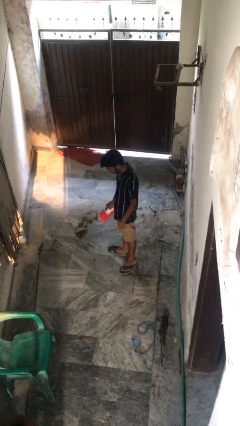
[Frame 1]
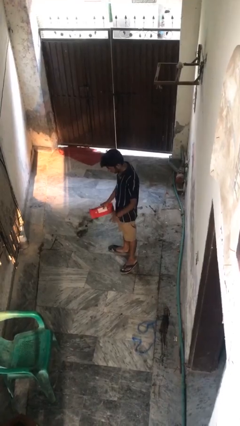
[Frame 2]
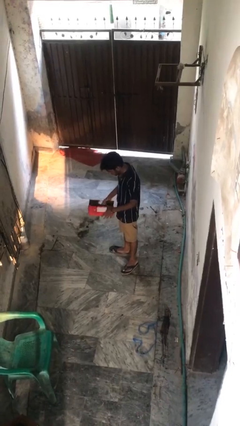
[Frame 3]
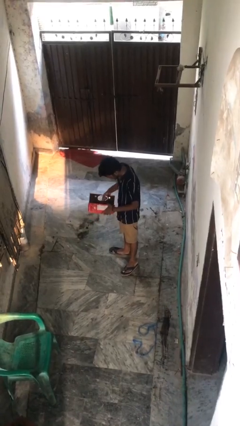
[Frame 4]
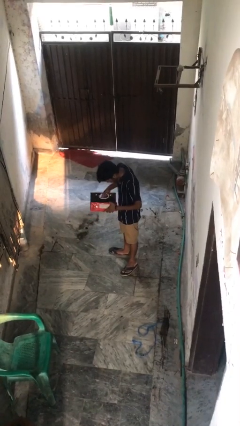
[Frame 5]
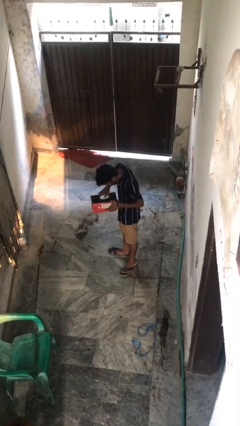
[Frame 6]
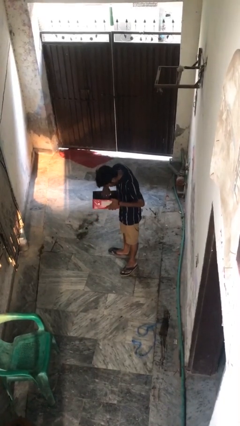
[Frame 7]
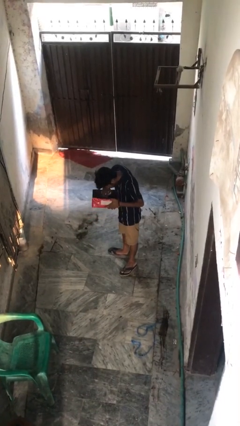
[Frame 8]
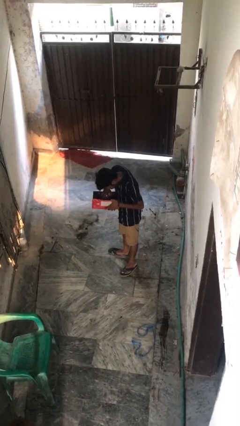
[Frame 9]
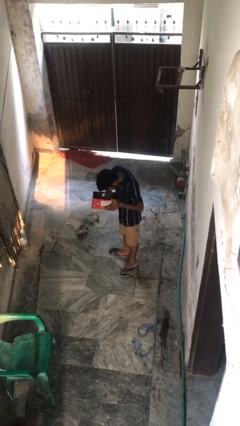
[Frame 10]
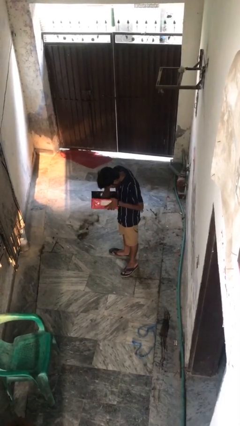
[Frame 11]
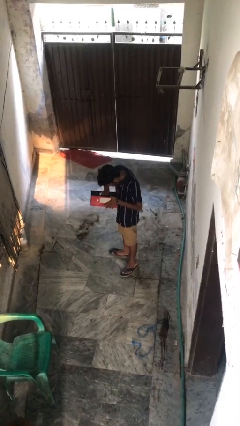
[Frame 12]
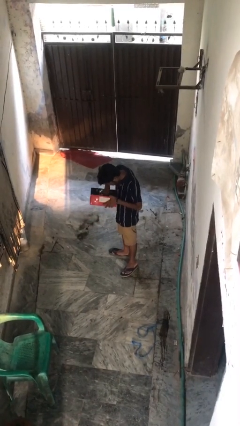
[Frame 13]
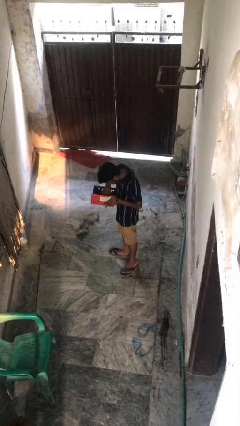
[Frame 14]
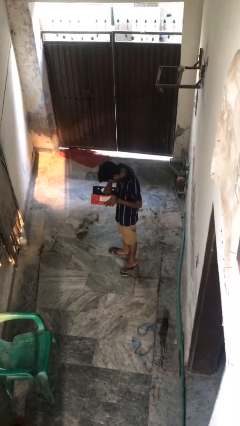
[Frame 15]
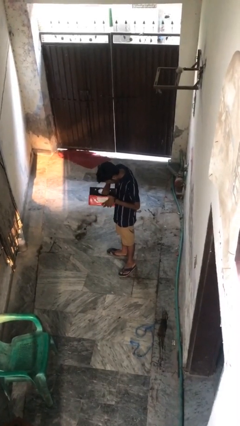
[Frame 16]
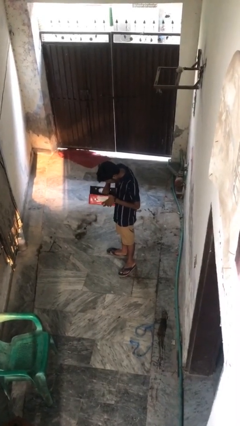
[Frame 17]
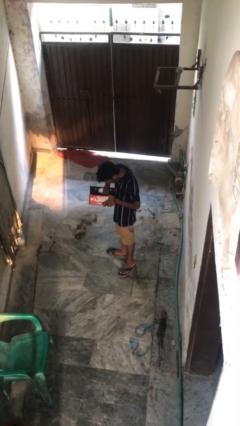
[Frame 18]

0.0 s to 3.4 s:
person searches in purse

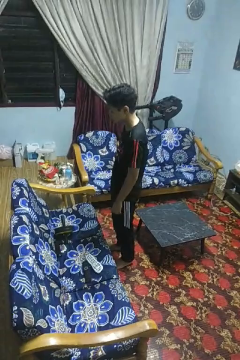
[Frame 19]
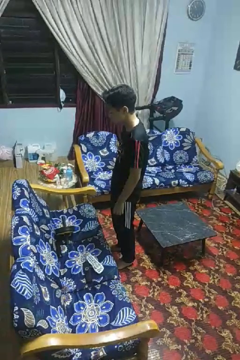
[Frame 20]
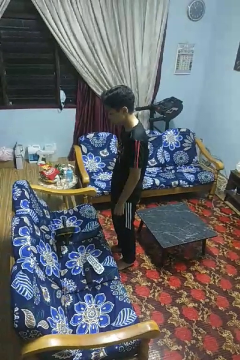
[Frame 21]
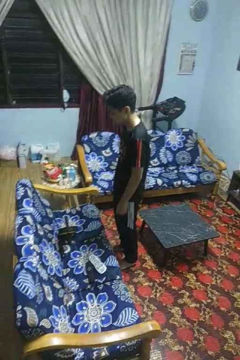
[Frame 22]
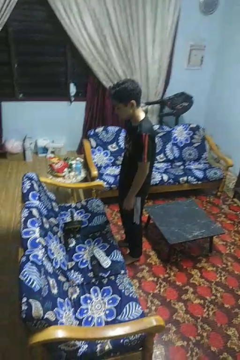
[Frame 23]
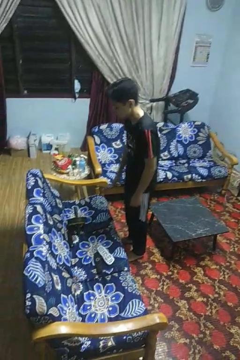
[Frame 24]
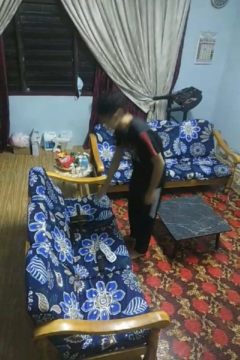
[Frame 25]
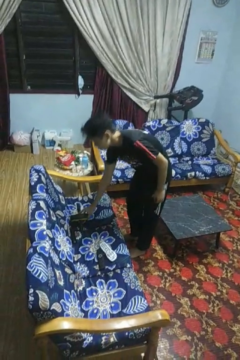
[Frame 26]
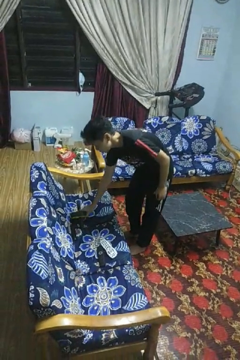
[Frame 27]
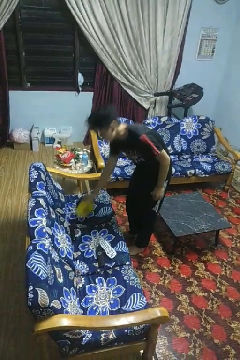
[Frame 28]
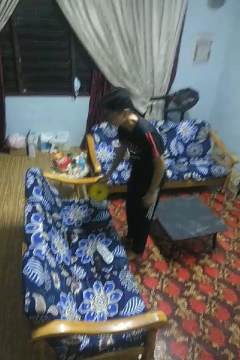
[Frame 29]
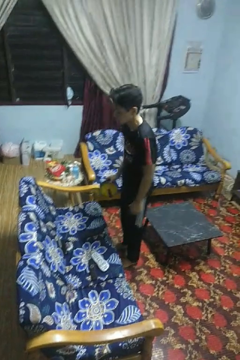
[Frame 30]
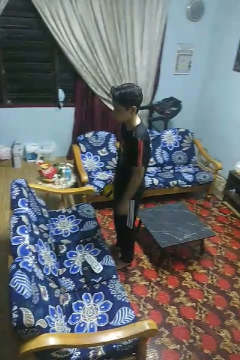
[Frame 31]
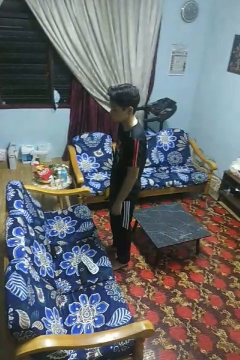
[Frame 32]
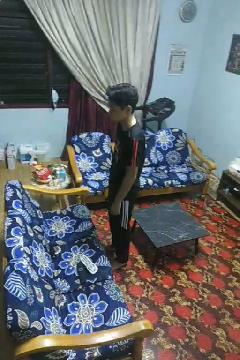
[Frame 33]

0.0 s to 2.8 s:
person picks up object from couch

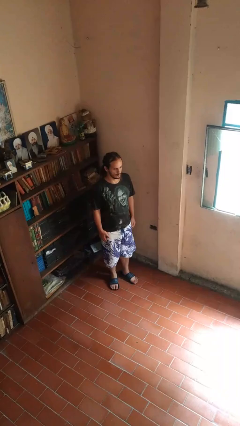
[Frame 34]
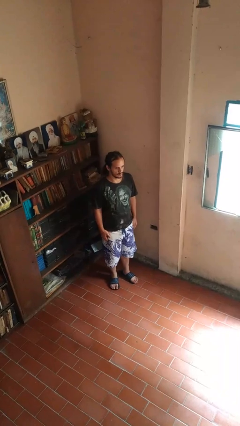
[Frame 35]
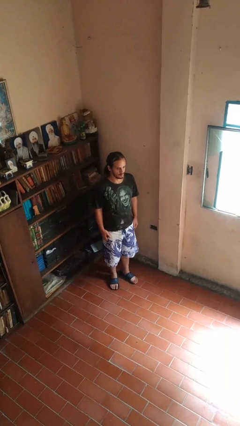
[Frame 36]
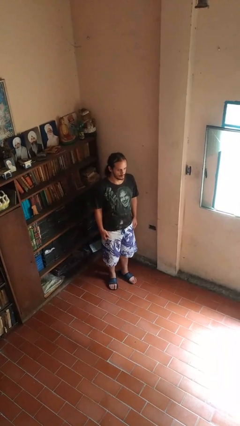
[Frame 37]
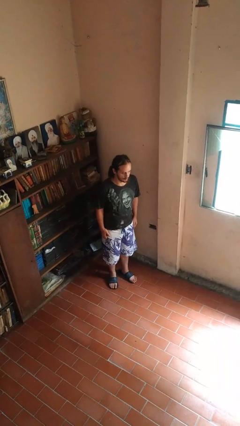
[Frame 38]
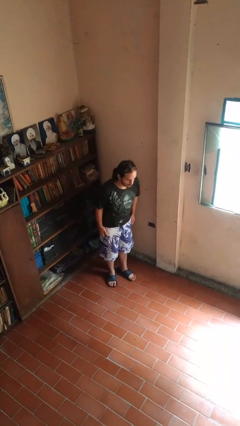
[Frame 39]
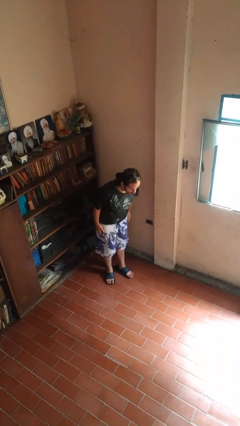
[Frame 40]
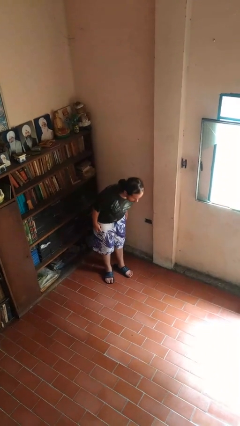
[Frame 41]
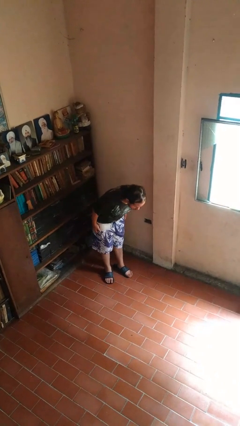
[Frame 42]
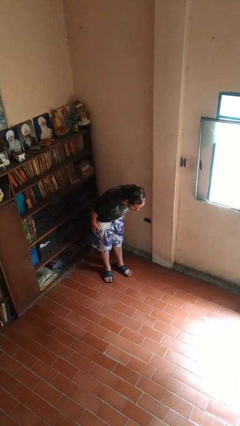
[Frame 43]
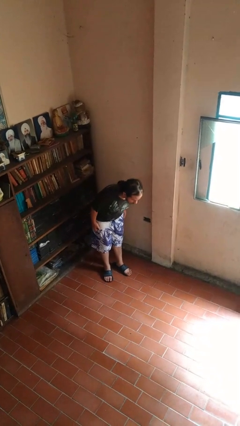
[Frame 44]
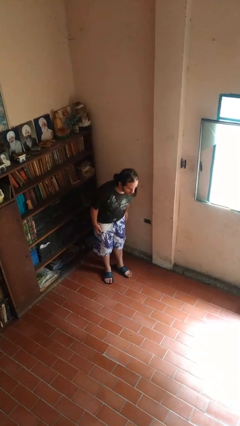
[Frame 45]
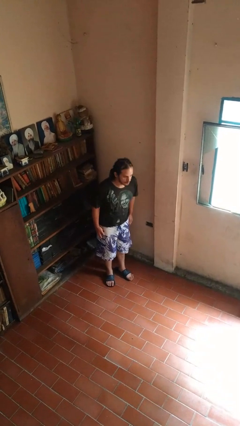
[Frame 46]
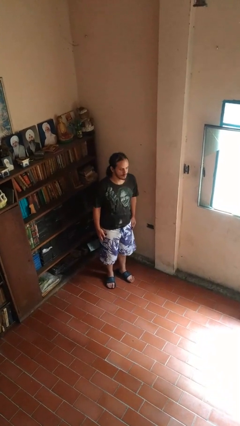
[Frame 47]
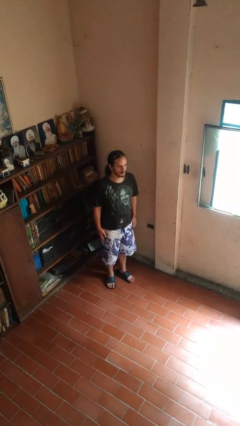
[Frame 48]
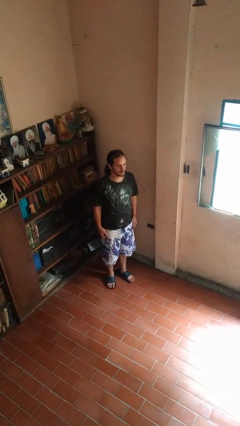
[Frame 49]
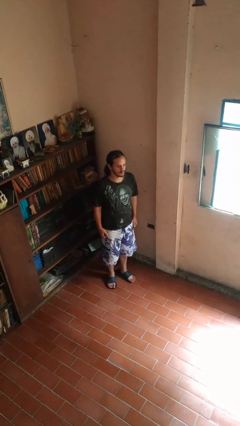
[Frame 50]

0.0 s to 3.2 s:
person bows

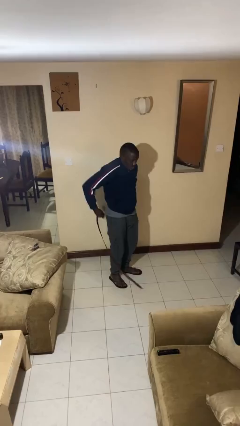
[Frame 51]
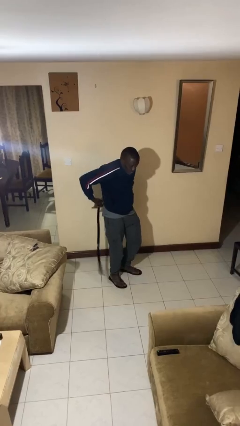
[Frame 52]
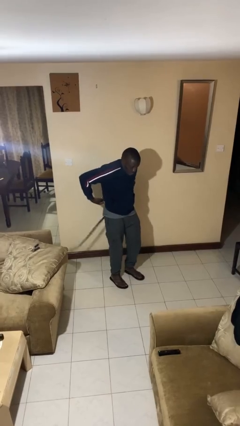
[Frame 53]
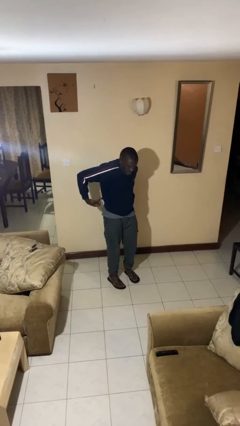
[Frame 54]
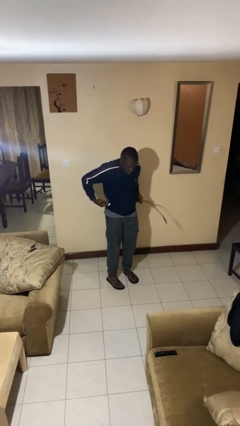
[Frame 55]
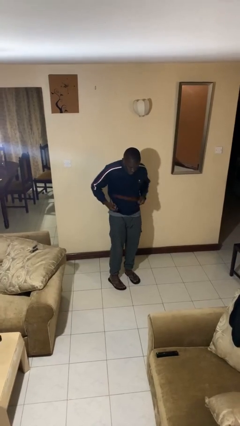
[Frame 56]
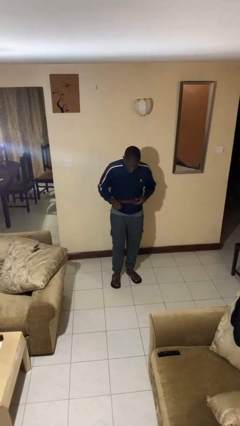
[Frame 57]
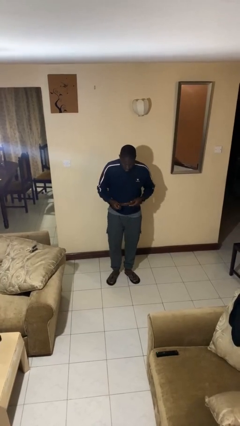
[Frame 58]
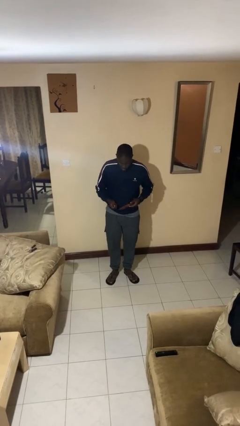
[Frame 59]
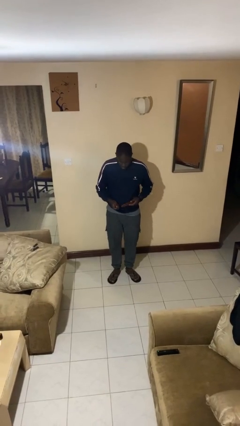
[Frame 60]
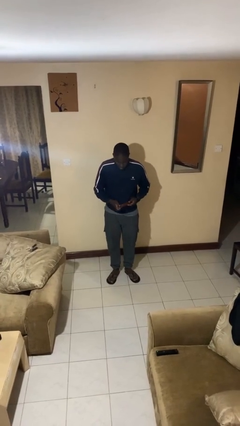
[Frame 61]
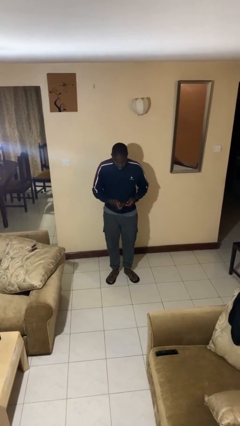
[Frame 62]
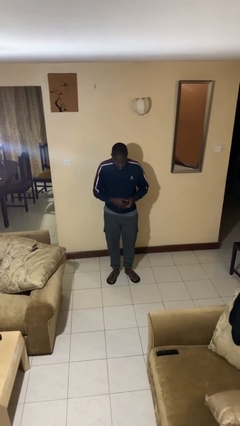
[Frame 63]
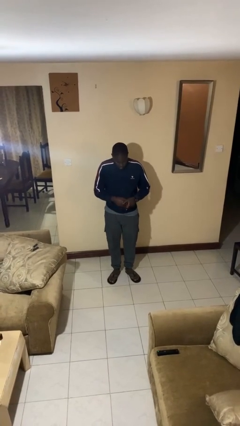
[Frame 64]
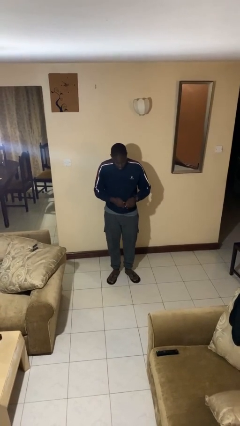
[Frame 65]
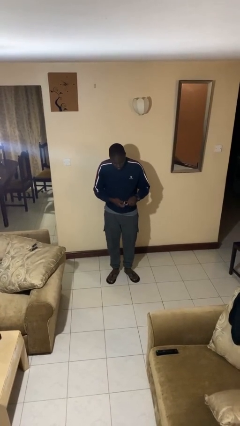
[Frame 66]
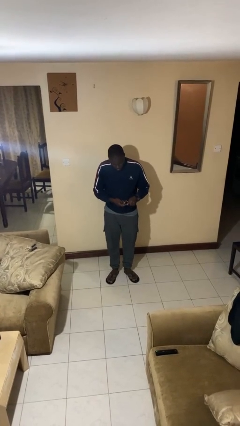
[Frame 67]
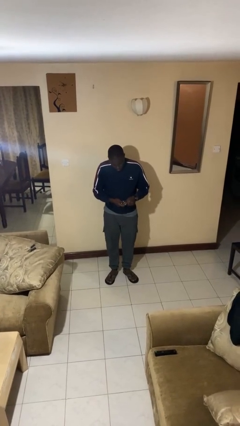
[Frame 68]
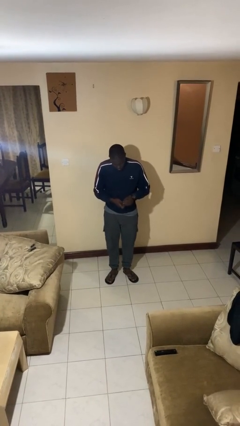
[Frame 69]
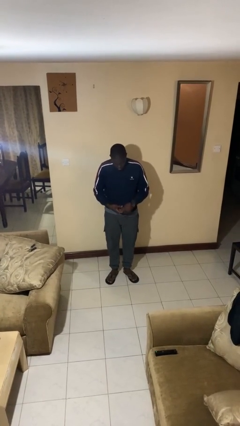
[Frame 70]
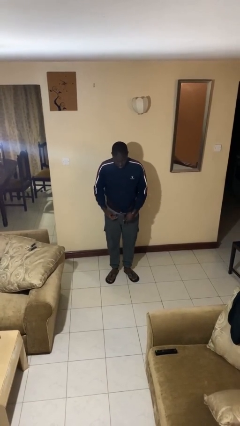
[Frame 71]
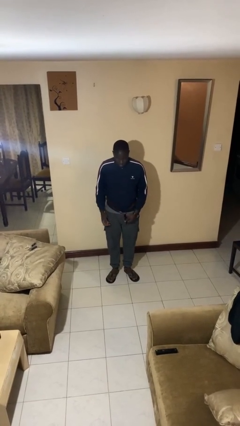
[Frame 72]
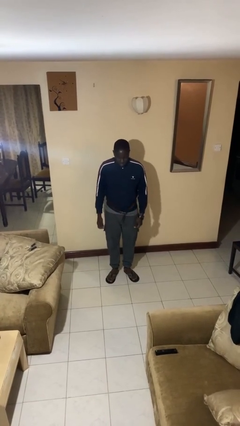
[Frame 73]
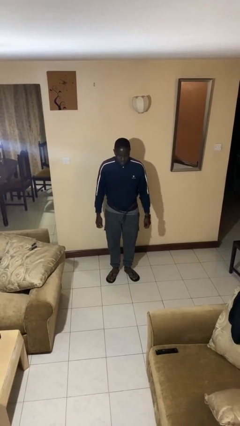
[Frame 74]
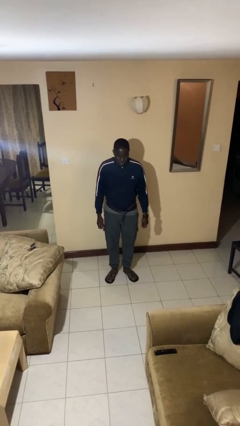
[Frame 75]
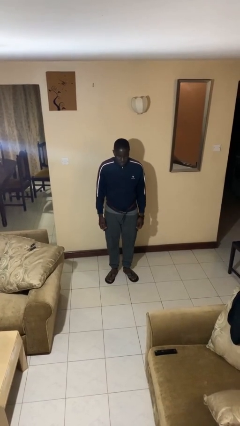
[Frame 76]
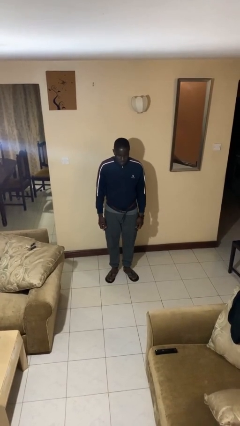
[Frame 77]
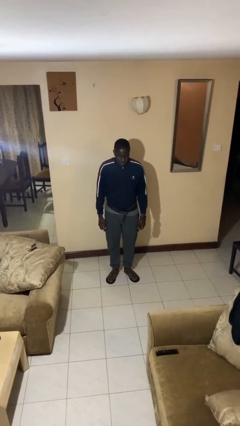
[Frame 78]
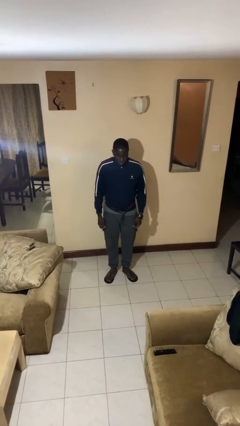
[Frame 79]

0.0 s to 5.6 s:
person puts on belt

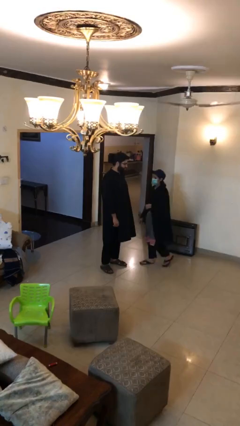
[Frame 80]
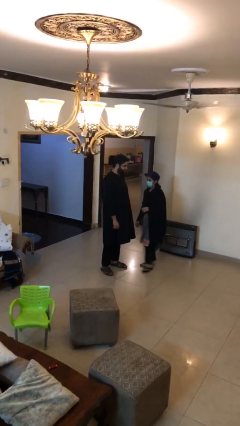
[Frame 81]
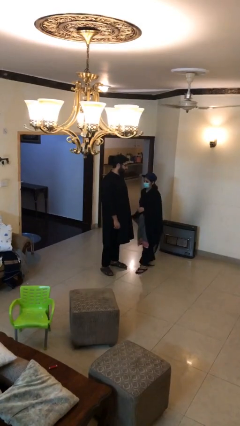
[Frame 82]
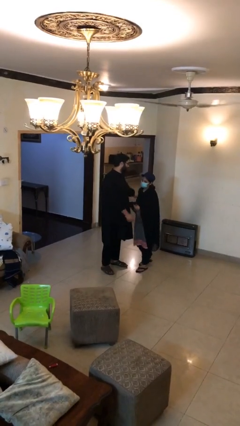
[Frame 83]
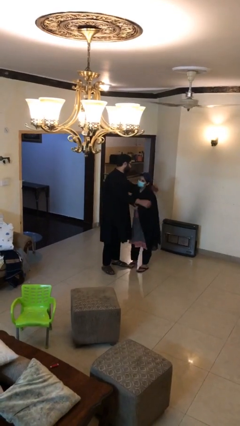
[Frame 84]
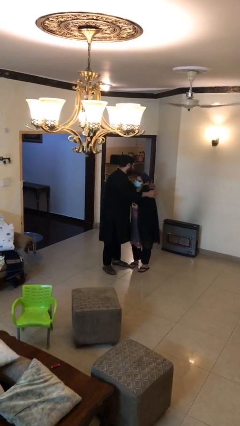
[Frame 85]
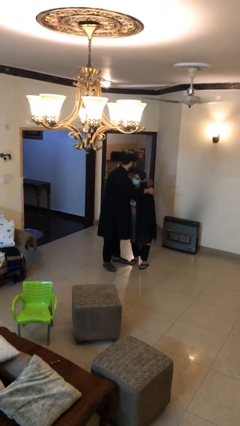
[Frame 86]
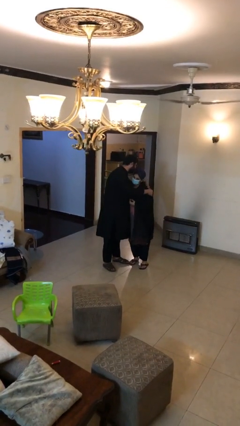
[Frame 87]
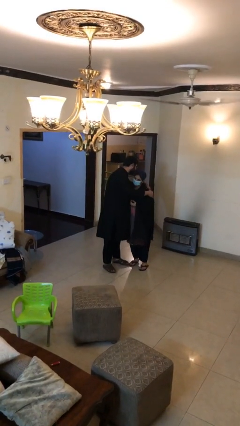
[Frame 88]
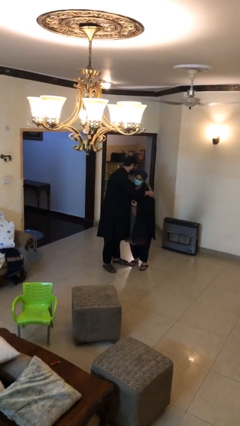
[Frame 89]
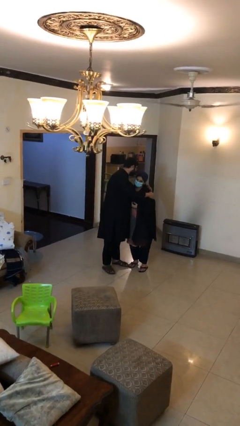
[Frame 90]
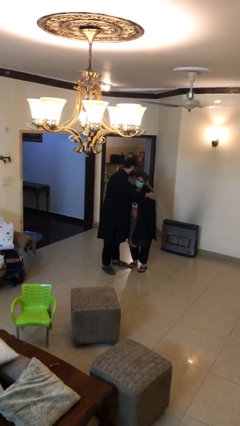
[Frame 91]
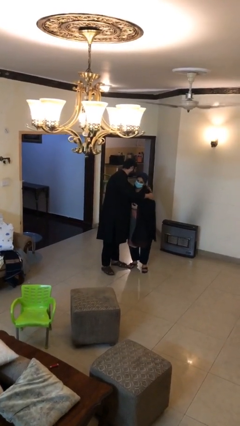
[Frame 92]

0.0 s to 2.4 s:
person embraces person

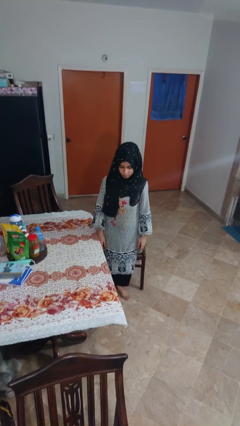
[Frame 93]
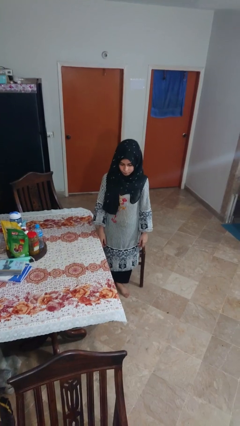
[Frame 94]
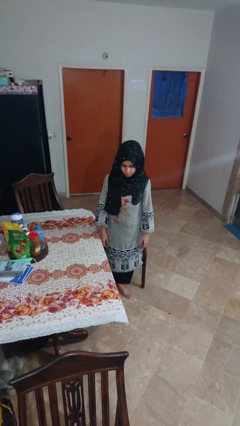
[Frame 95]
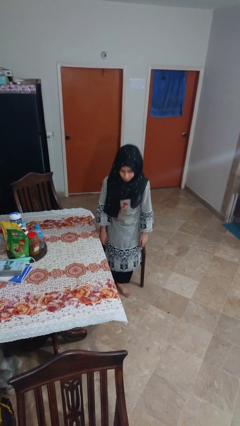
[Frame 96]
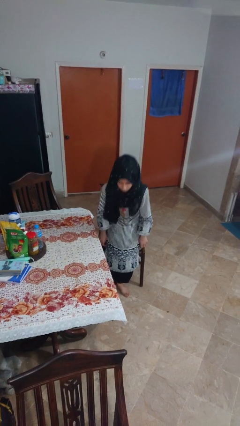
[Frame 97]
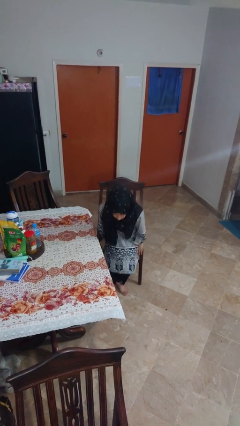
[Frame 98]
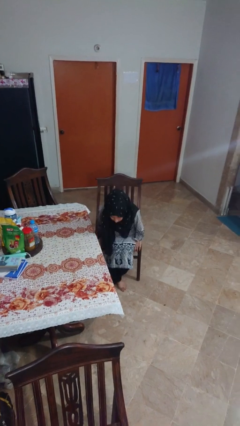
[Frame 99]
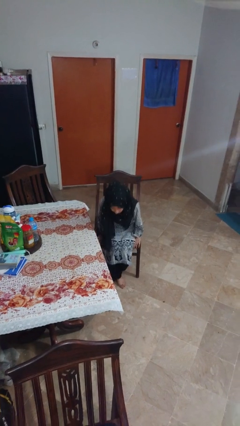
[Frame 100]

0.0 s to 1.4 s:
person sits down
